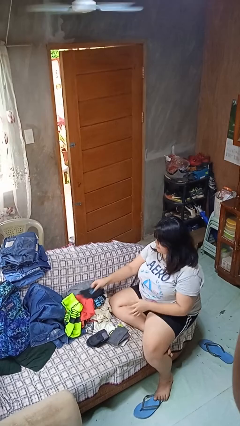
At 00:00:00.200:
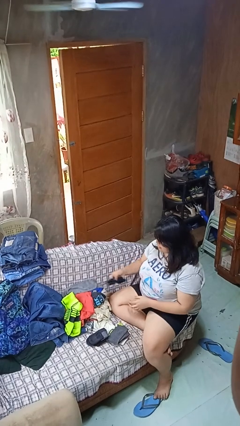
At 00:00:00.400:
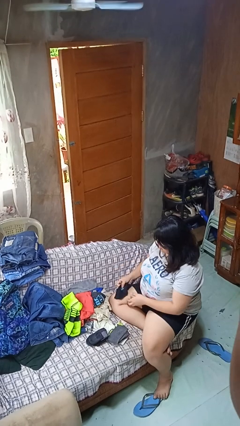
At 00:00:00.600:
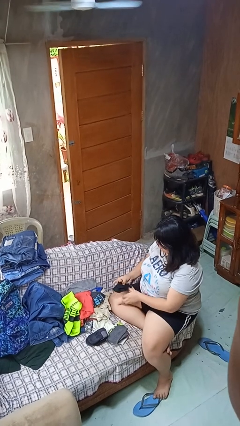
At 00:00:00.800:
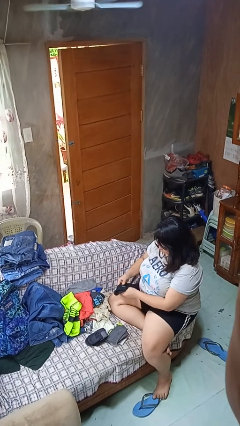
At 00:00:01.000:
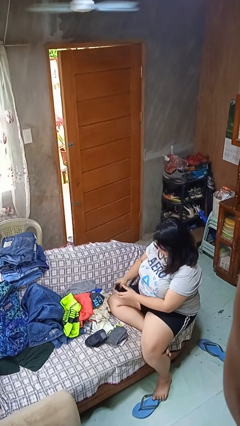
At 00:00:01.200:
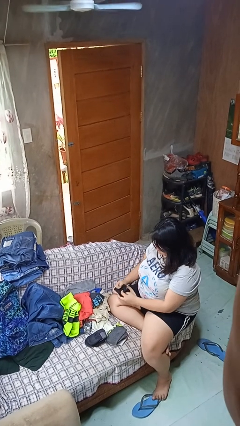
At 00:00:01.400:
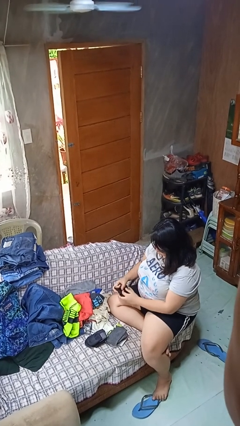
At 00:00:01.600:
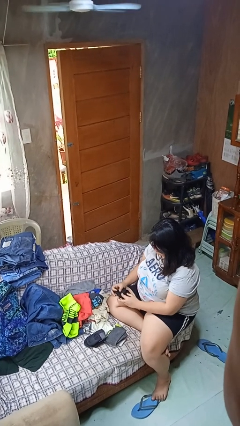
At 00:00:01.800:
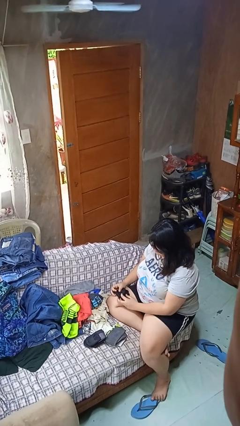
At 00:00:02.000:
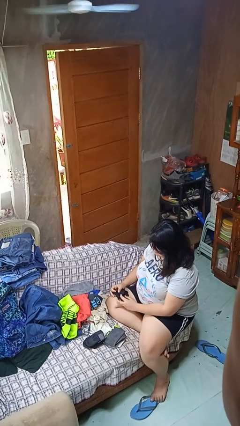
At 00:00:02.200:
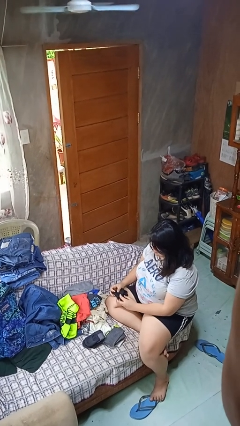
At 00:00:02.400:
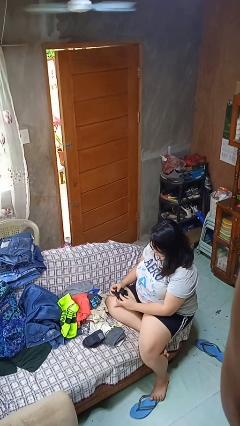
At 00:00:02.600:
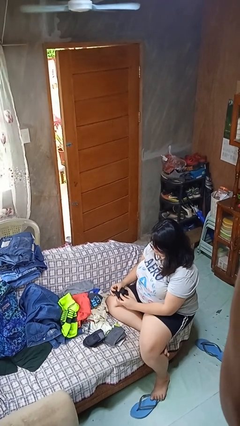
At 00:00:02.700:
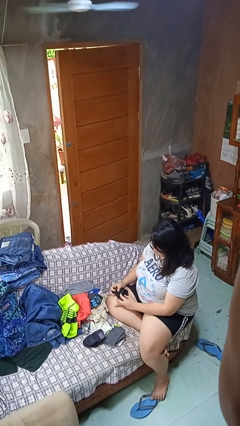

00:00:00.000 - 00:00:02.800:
person folds socks

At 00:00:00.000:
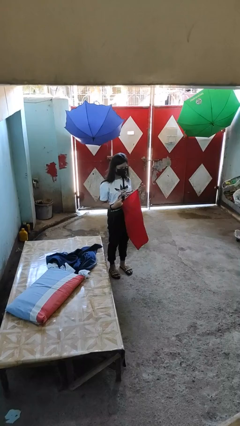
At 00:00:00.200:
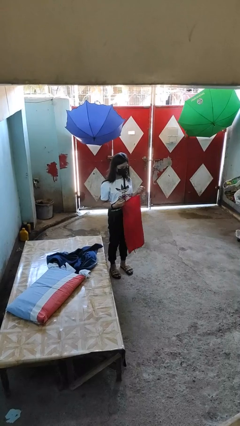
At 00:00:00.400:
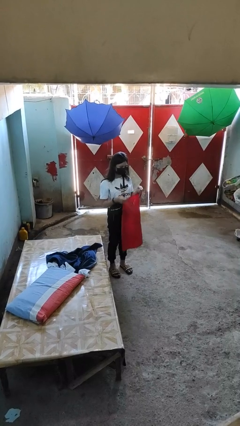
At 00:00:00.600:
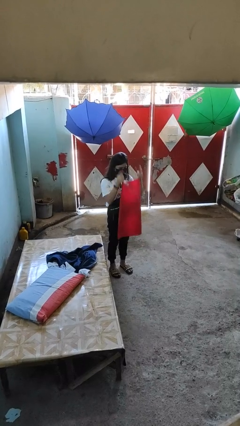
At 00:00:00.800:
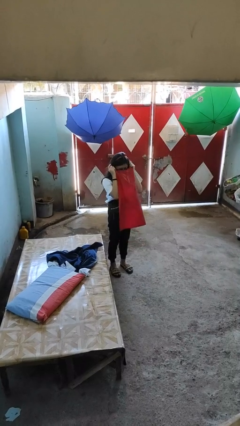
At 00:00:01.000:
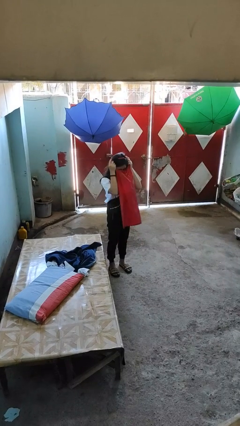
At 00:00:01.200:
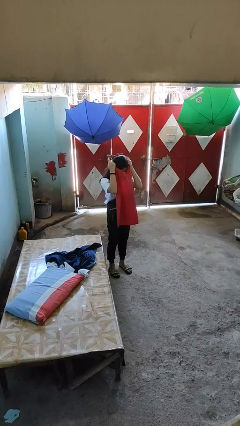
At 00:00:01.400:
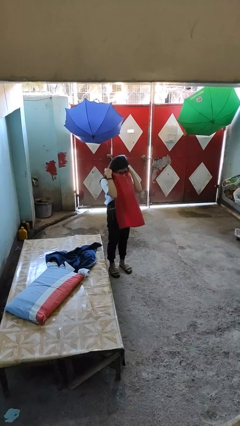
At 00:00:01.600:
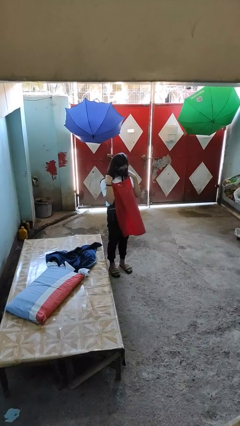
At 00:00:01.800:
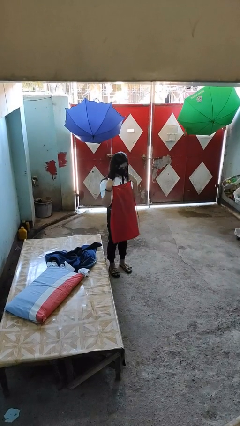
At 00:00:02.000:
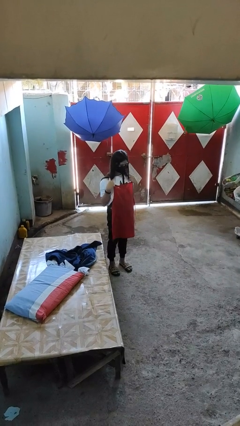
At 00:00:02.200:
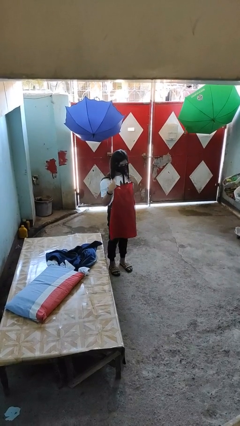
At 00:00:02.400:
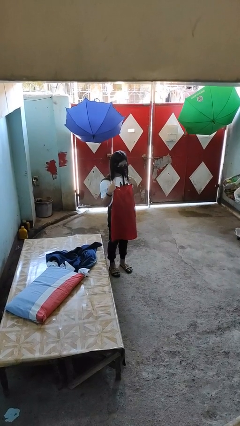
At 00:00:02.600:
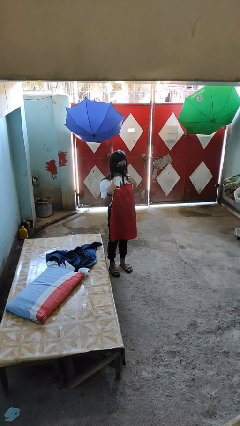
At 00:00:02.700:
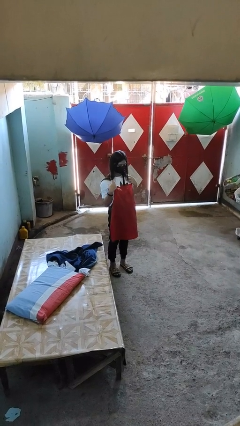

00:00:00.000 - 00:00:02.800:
person puts on apron

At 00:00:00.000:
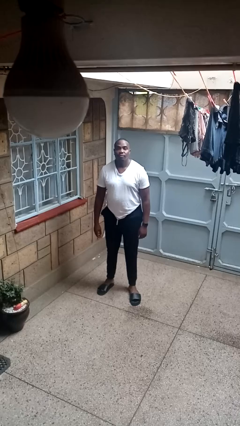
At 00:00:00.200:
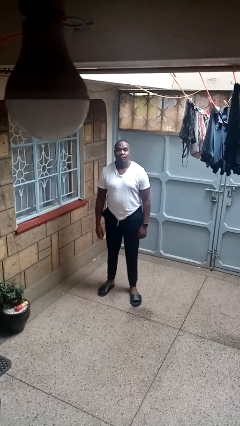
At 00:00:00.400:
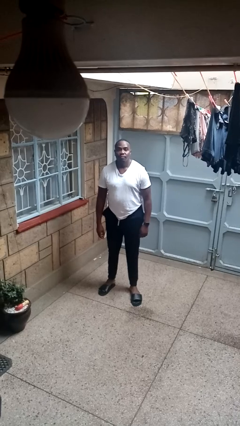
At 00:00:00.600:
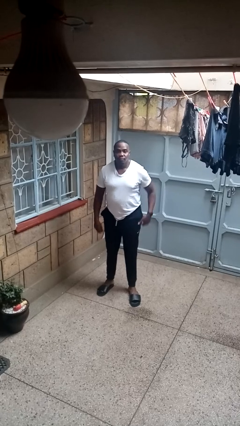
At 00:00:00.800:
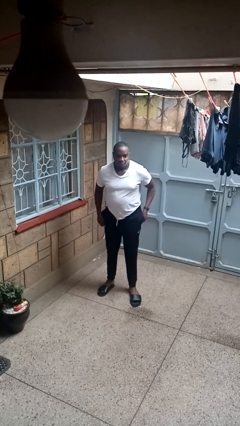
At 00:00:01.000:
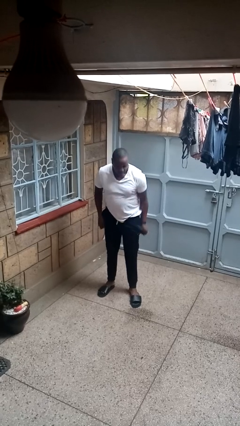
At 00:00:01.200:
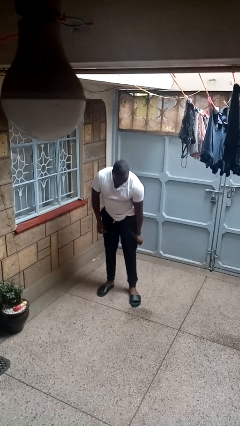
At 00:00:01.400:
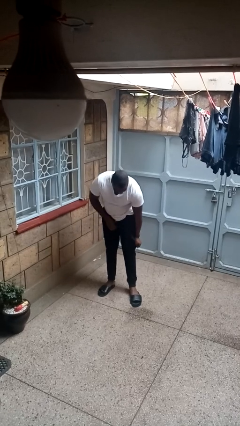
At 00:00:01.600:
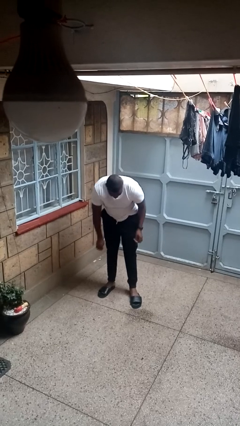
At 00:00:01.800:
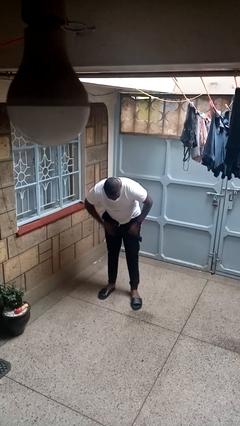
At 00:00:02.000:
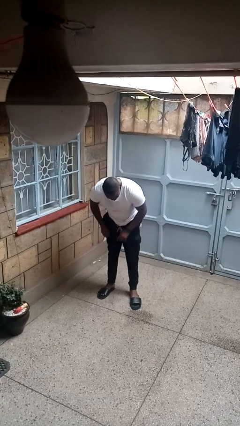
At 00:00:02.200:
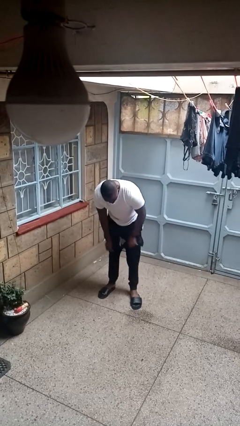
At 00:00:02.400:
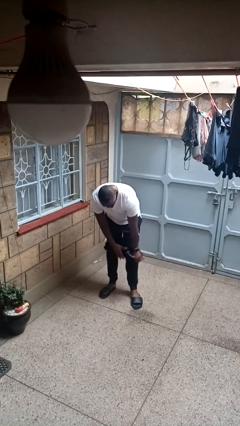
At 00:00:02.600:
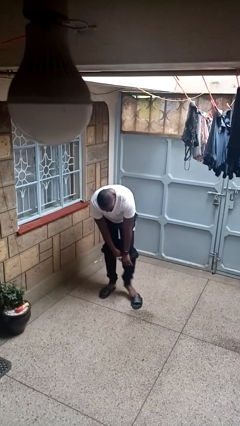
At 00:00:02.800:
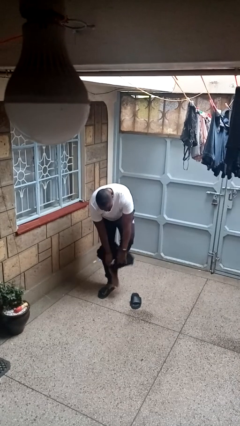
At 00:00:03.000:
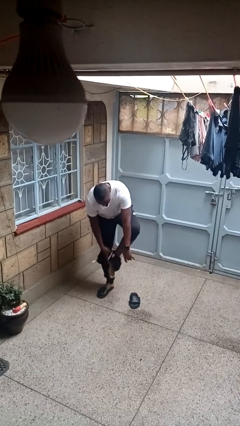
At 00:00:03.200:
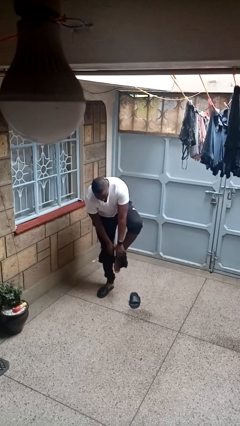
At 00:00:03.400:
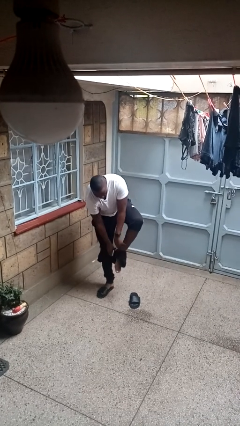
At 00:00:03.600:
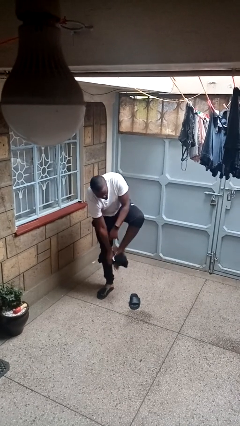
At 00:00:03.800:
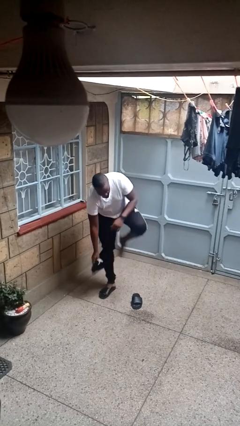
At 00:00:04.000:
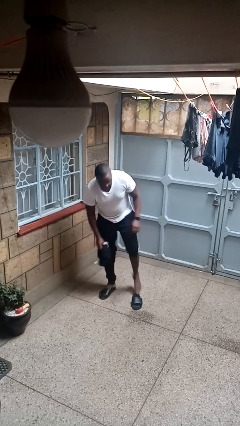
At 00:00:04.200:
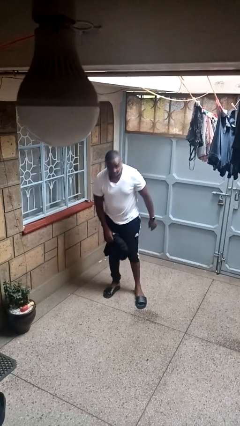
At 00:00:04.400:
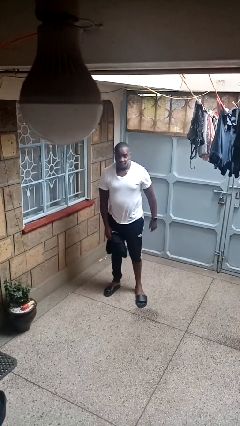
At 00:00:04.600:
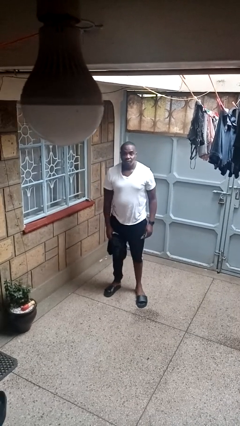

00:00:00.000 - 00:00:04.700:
person takes off pants

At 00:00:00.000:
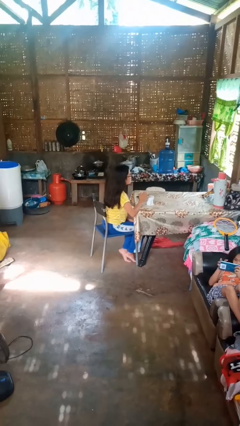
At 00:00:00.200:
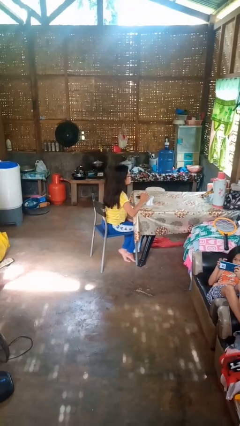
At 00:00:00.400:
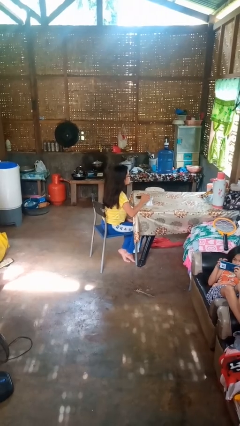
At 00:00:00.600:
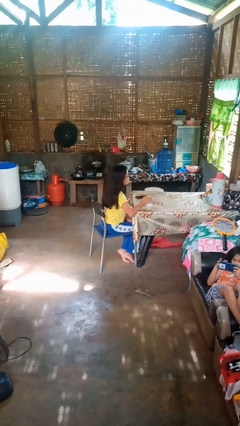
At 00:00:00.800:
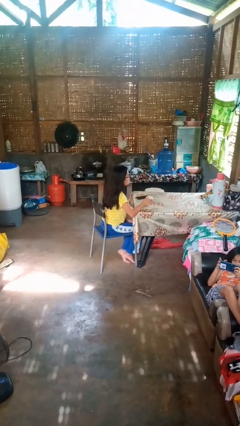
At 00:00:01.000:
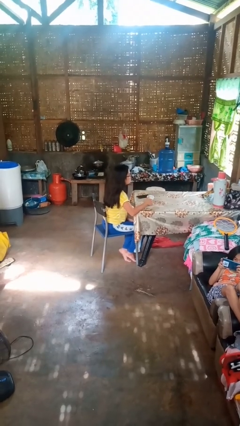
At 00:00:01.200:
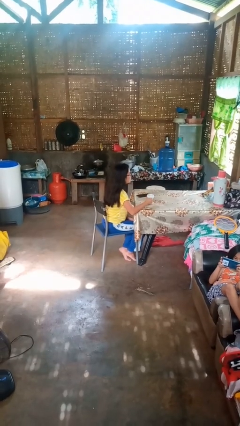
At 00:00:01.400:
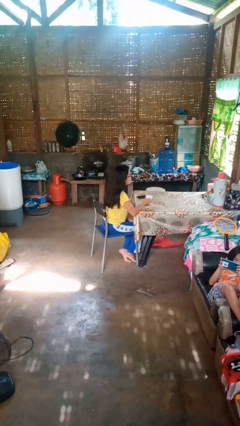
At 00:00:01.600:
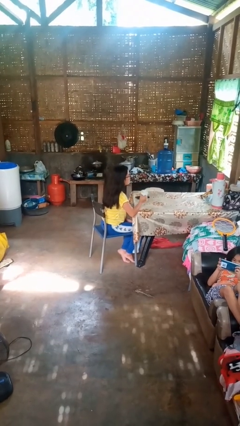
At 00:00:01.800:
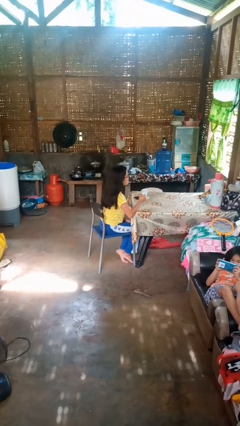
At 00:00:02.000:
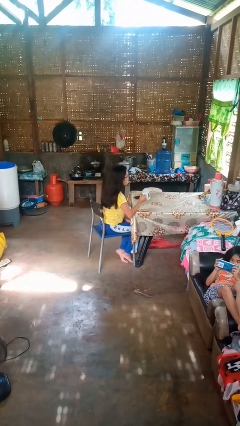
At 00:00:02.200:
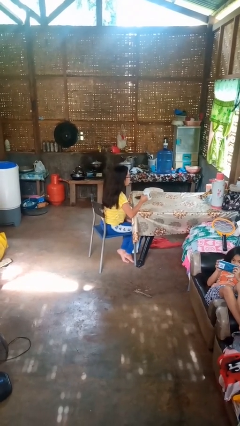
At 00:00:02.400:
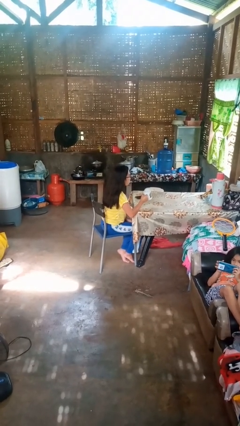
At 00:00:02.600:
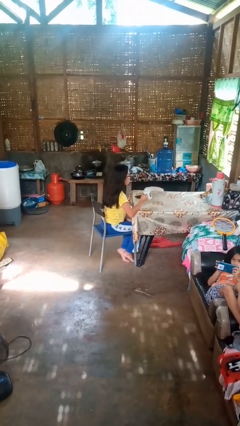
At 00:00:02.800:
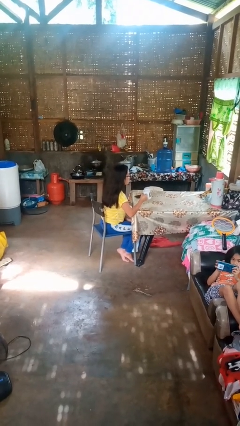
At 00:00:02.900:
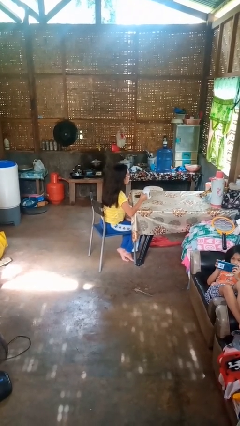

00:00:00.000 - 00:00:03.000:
person picks up object from table

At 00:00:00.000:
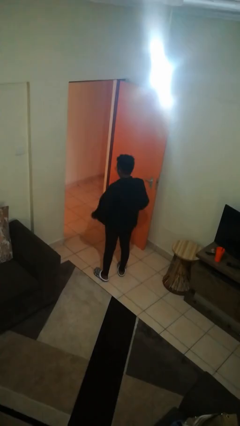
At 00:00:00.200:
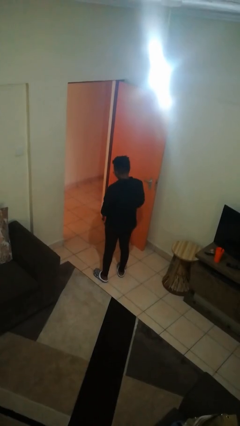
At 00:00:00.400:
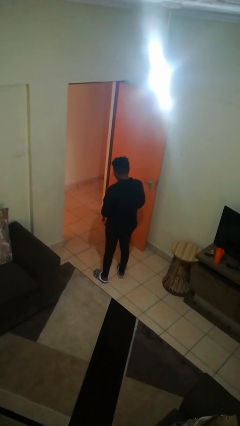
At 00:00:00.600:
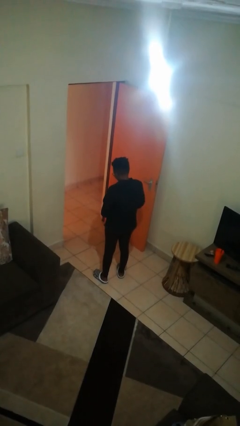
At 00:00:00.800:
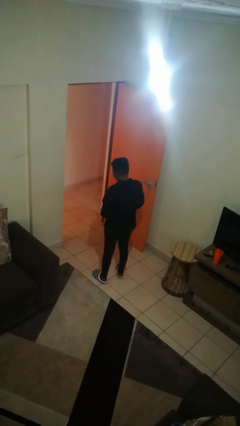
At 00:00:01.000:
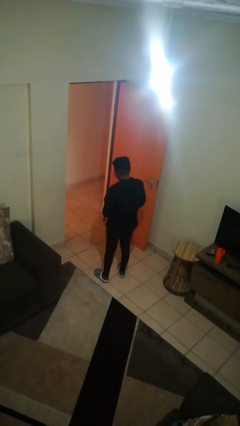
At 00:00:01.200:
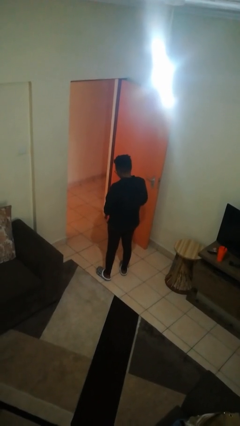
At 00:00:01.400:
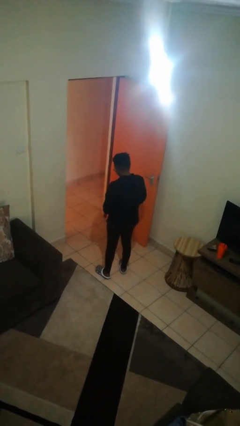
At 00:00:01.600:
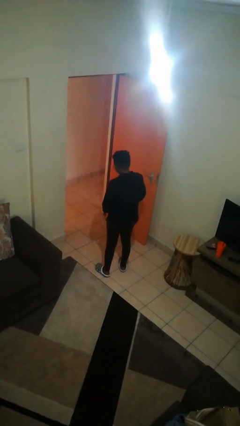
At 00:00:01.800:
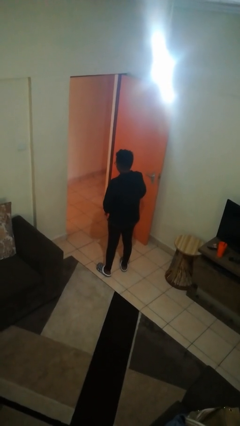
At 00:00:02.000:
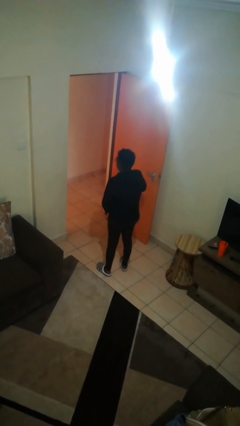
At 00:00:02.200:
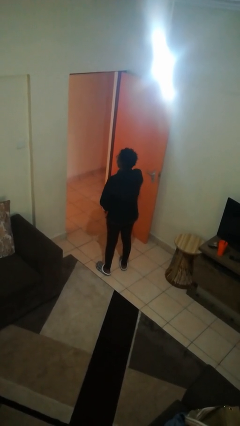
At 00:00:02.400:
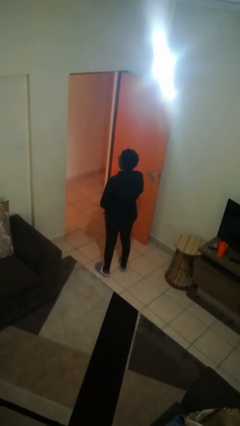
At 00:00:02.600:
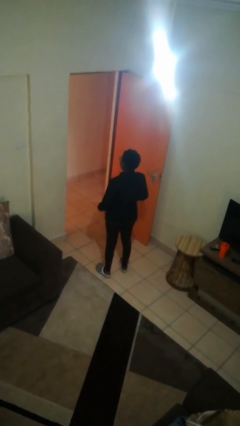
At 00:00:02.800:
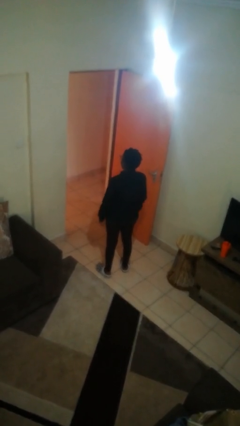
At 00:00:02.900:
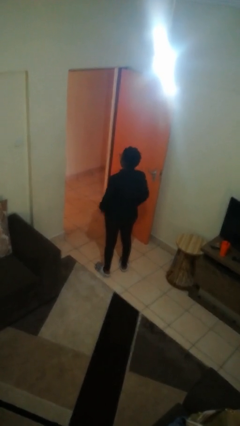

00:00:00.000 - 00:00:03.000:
person zips up jacket

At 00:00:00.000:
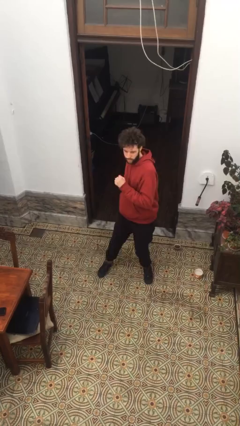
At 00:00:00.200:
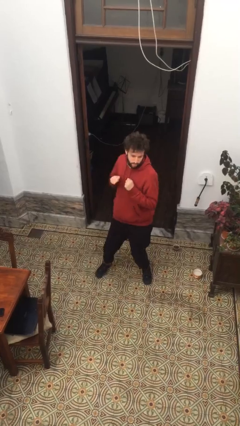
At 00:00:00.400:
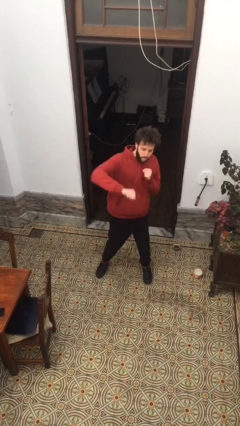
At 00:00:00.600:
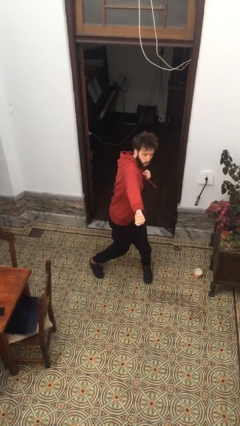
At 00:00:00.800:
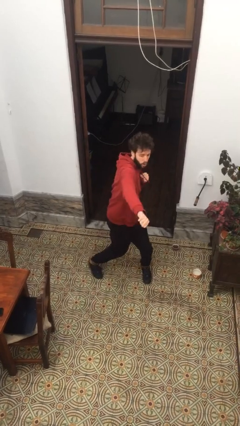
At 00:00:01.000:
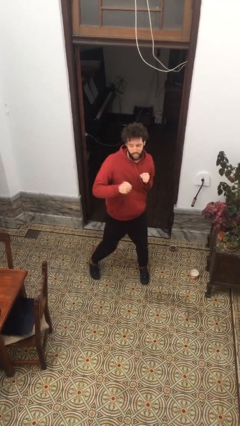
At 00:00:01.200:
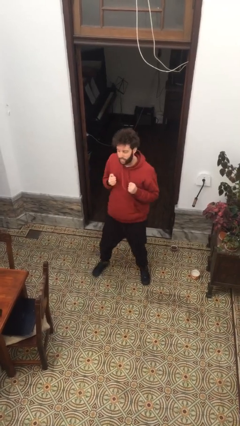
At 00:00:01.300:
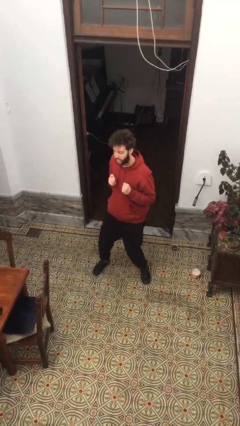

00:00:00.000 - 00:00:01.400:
person punches
